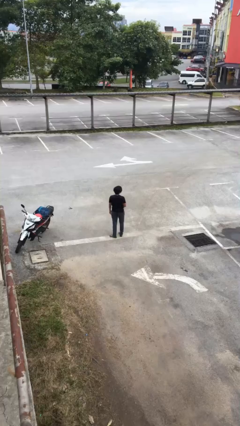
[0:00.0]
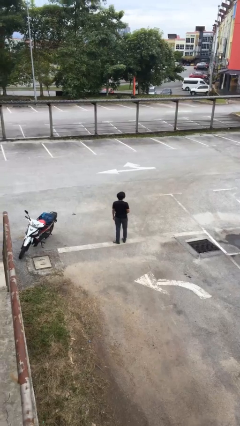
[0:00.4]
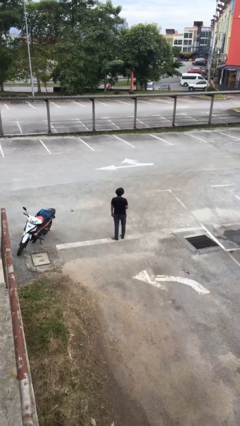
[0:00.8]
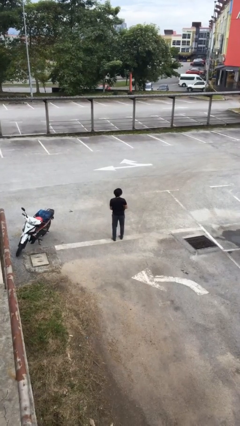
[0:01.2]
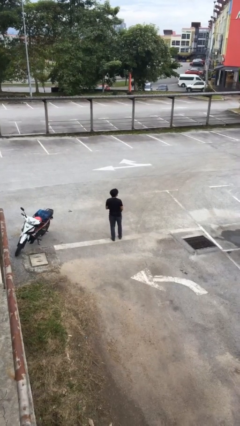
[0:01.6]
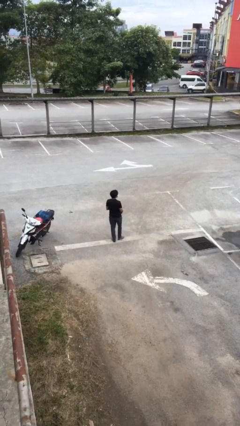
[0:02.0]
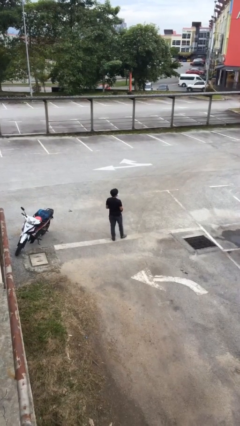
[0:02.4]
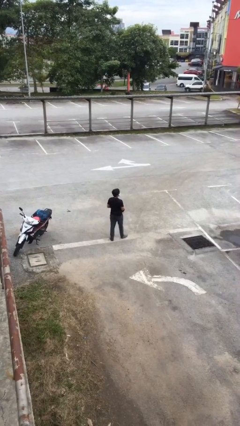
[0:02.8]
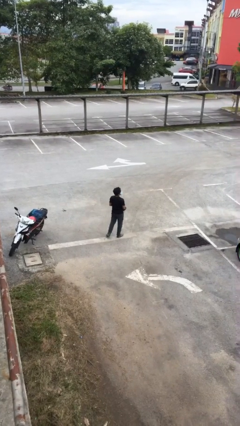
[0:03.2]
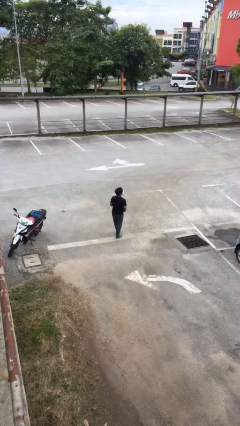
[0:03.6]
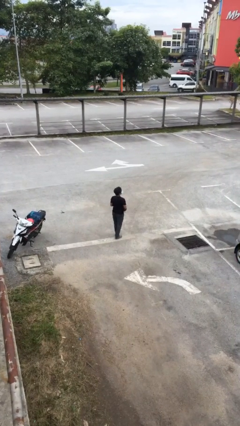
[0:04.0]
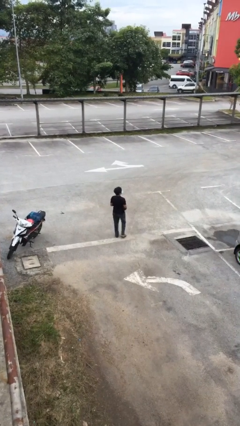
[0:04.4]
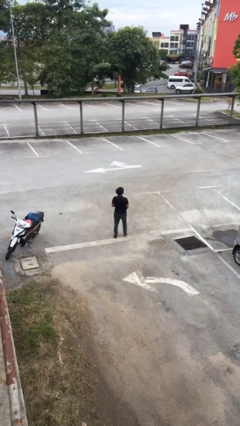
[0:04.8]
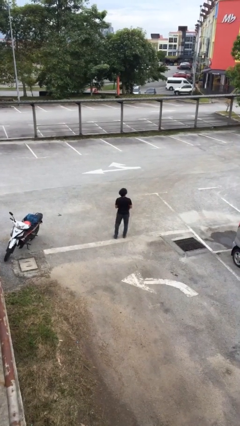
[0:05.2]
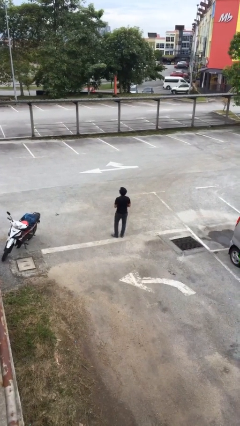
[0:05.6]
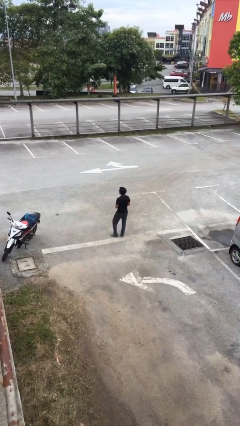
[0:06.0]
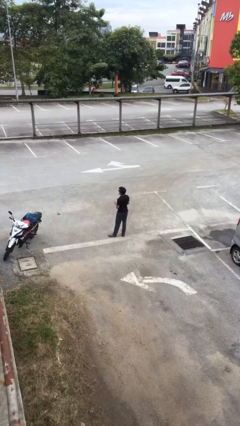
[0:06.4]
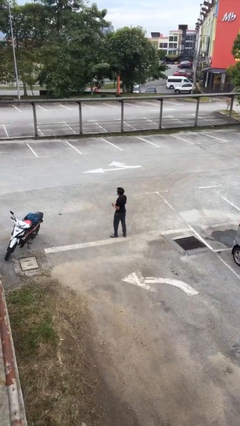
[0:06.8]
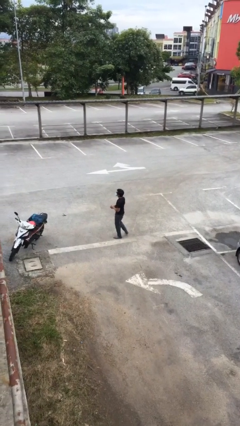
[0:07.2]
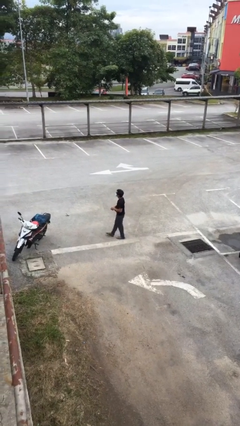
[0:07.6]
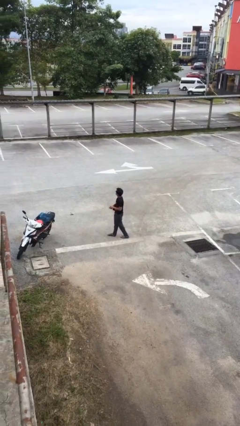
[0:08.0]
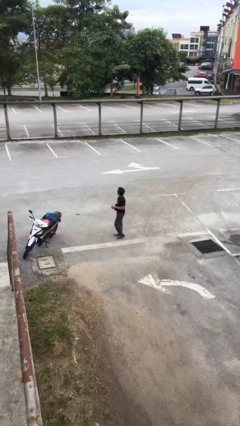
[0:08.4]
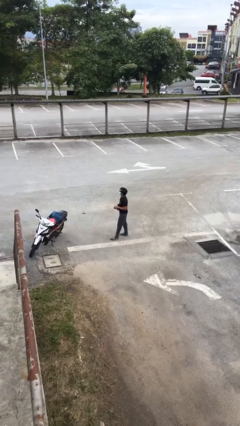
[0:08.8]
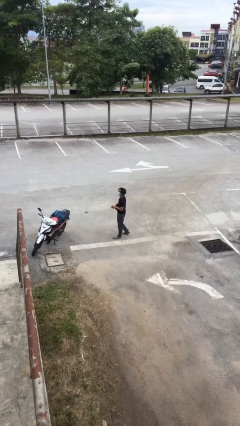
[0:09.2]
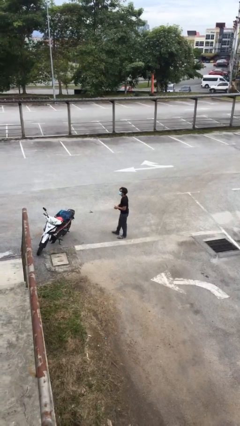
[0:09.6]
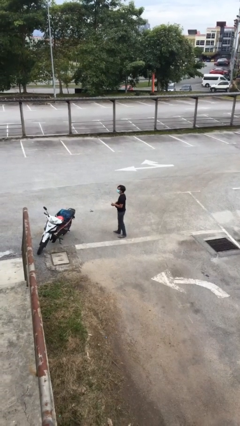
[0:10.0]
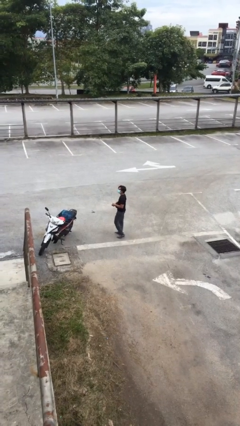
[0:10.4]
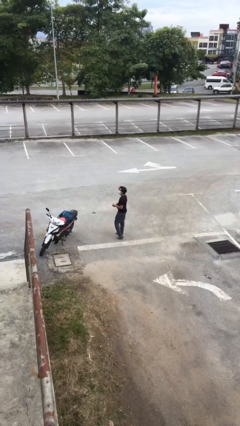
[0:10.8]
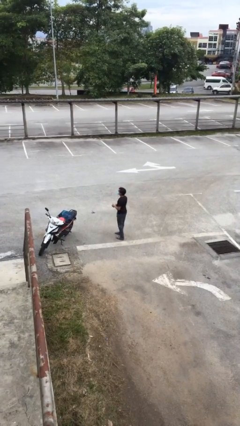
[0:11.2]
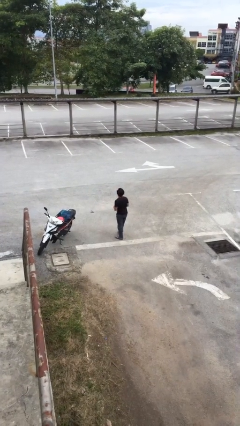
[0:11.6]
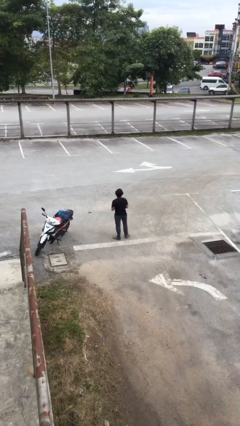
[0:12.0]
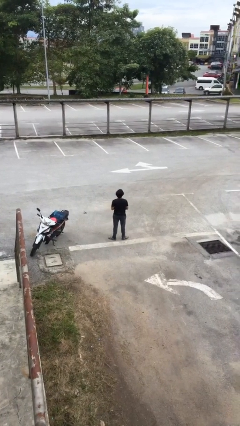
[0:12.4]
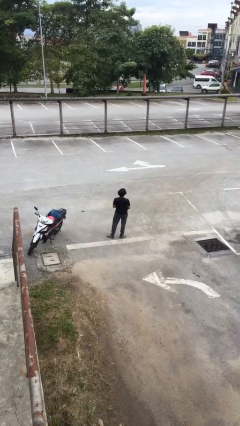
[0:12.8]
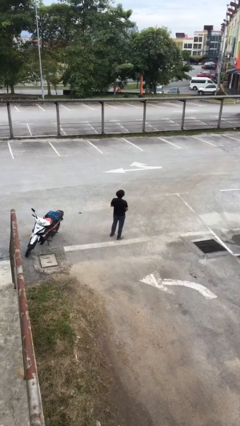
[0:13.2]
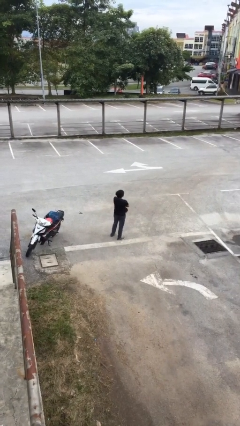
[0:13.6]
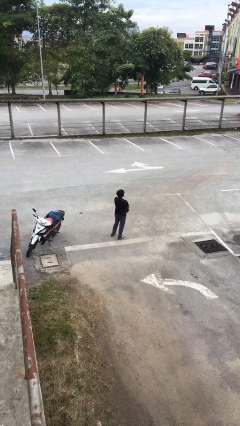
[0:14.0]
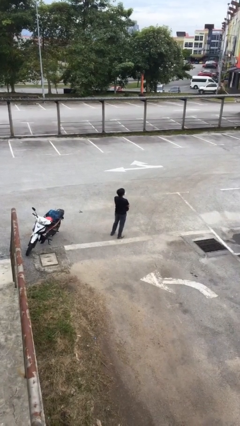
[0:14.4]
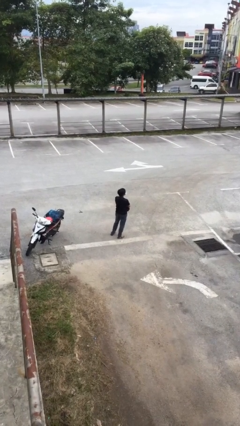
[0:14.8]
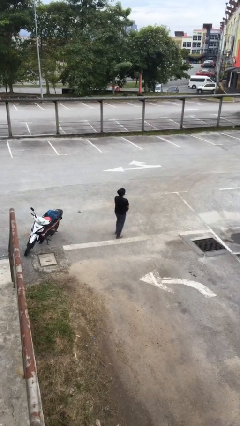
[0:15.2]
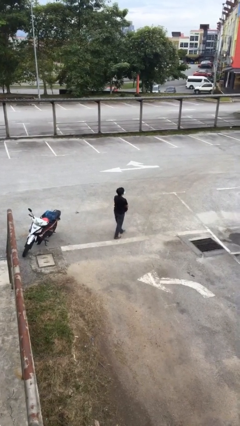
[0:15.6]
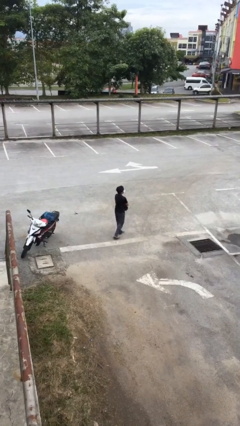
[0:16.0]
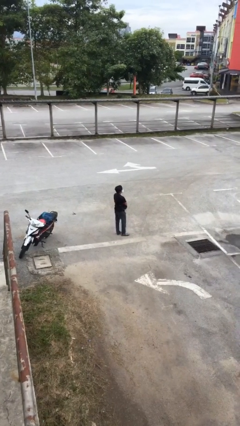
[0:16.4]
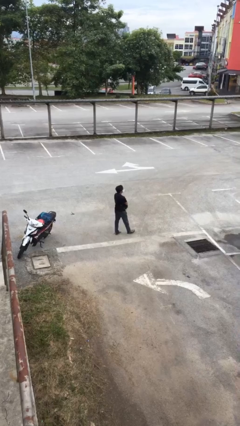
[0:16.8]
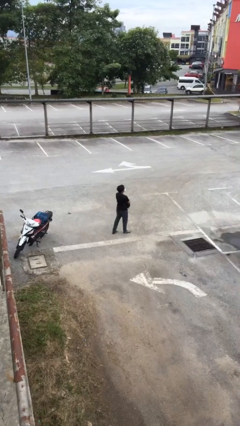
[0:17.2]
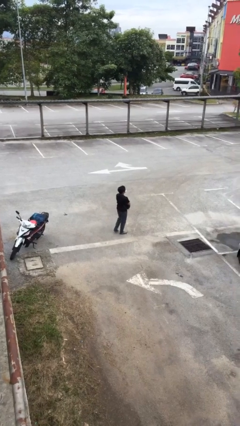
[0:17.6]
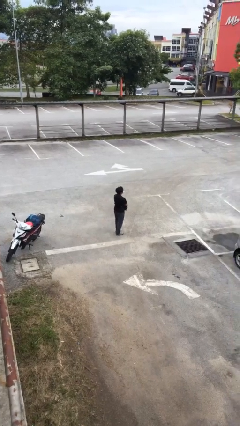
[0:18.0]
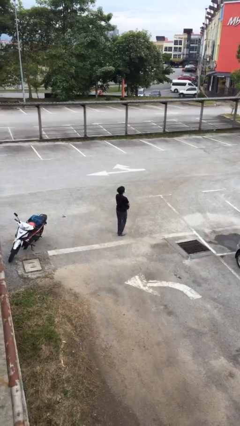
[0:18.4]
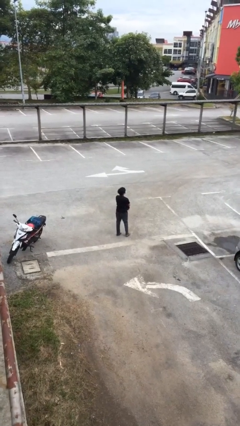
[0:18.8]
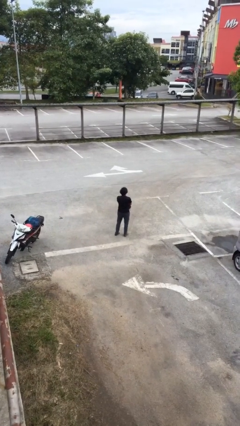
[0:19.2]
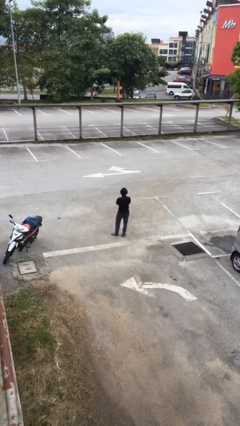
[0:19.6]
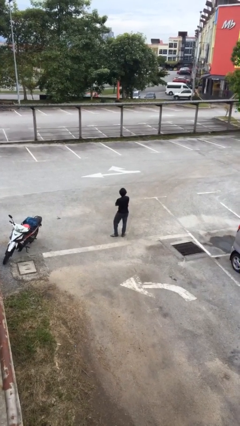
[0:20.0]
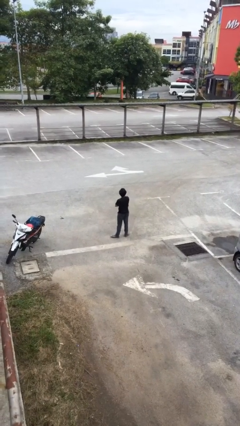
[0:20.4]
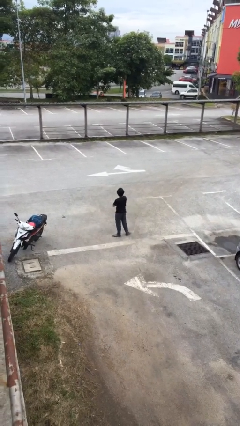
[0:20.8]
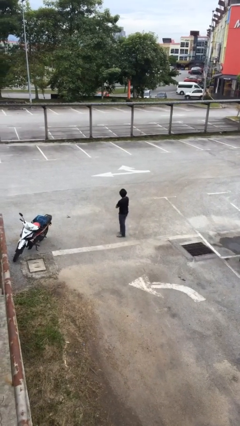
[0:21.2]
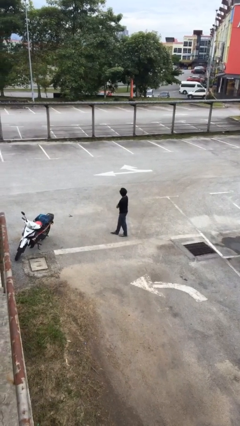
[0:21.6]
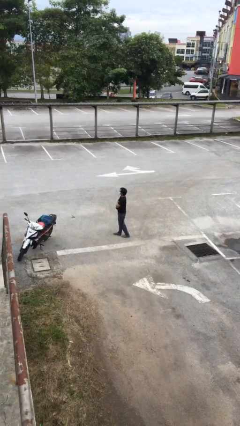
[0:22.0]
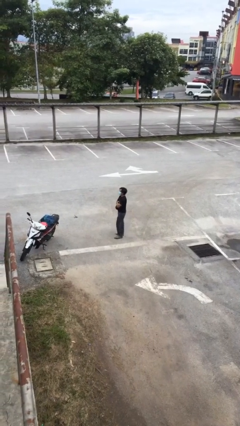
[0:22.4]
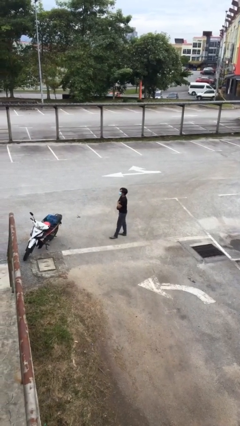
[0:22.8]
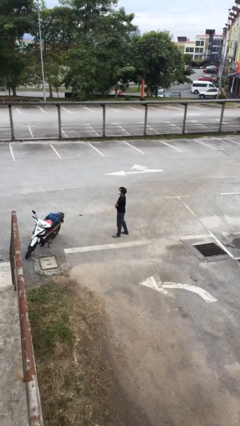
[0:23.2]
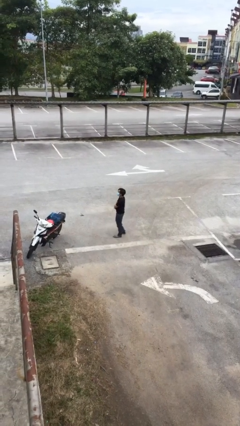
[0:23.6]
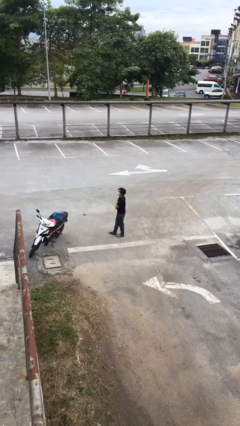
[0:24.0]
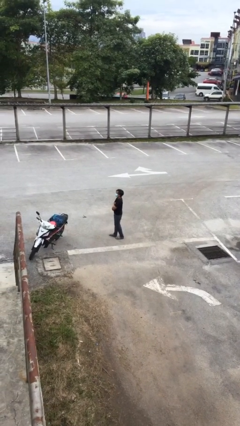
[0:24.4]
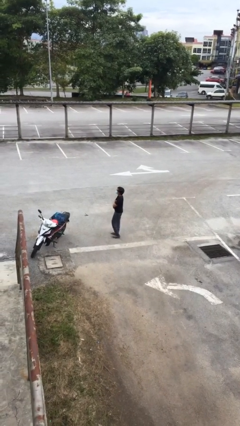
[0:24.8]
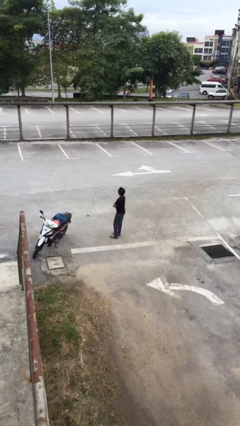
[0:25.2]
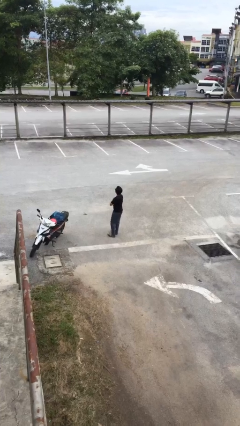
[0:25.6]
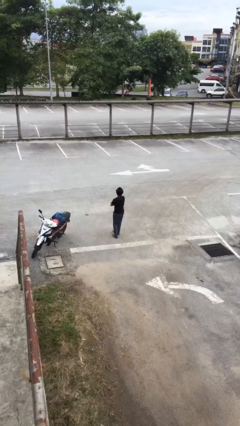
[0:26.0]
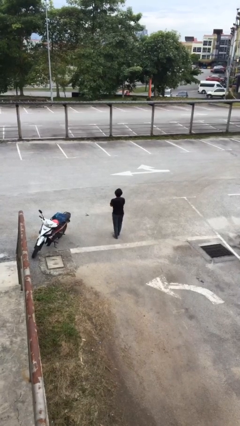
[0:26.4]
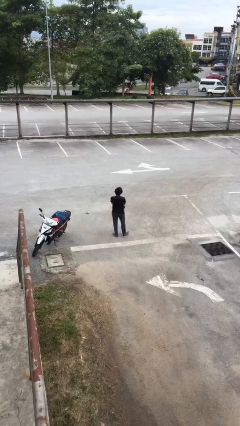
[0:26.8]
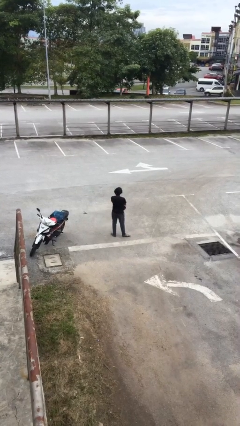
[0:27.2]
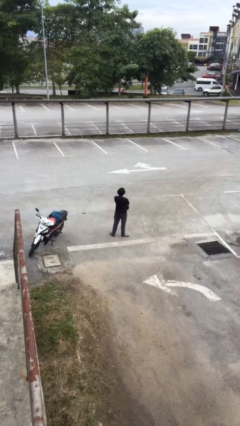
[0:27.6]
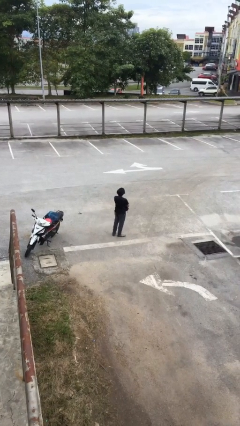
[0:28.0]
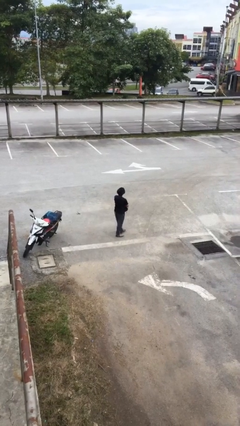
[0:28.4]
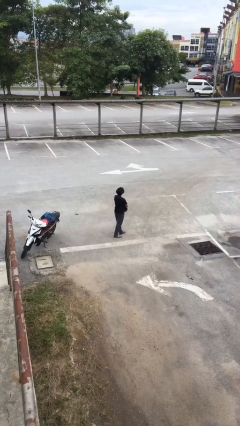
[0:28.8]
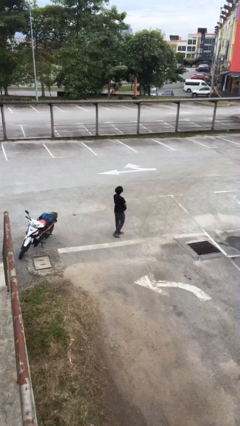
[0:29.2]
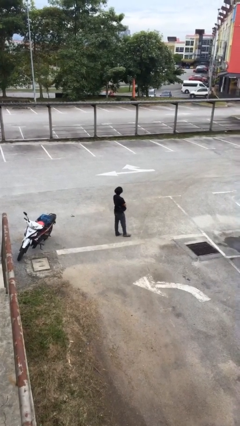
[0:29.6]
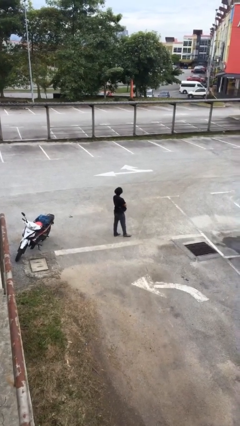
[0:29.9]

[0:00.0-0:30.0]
person walks

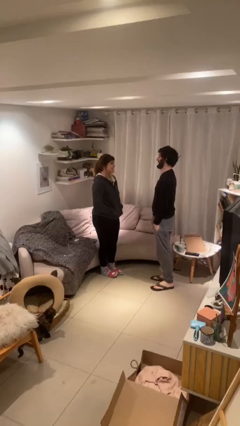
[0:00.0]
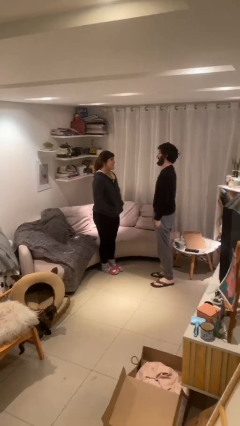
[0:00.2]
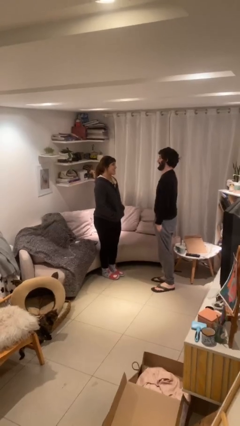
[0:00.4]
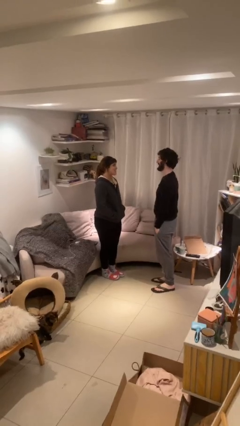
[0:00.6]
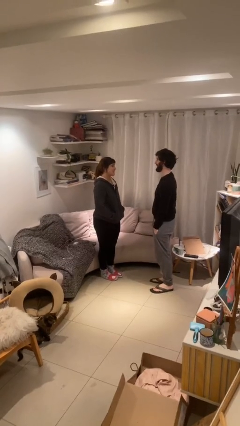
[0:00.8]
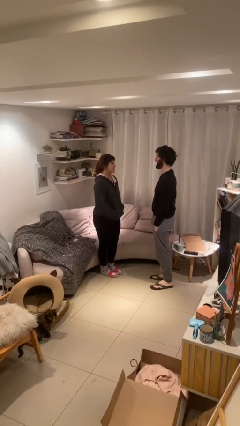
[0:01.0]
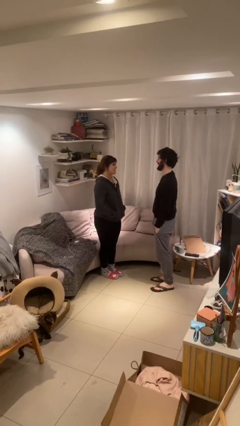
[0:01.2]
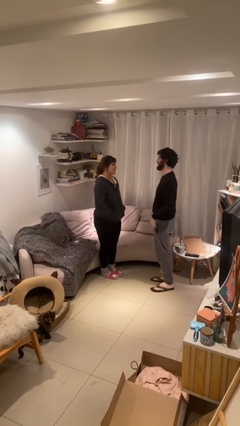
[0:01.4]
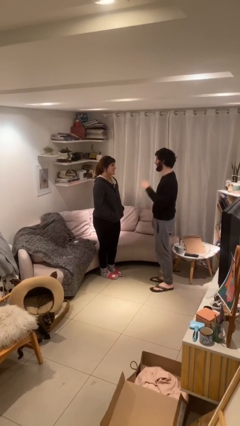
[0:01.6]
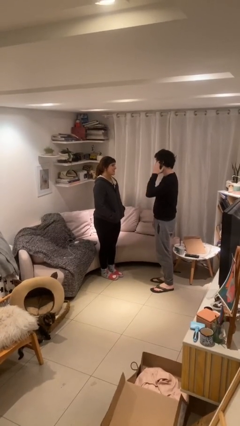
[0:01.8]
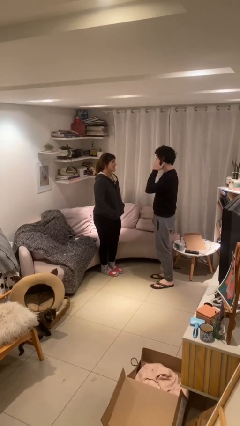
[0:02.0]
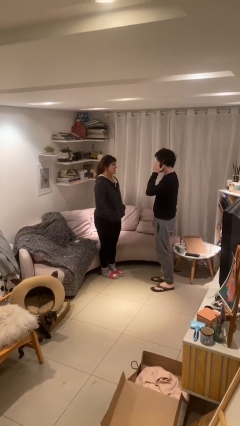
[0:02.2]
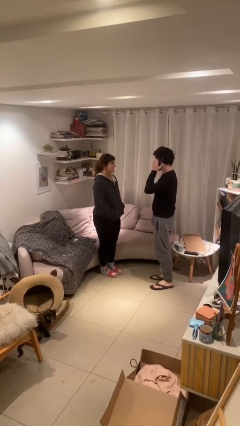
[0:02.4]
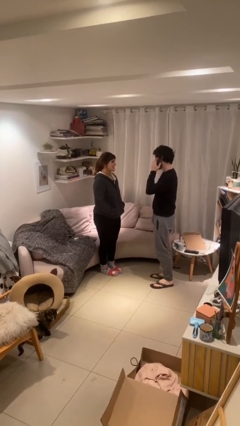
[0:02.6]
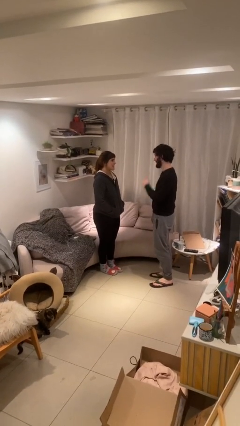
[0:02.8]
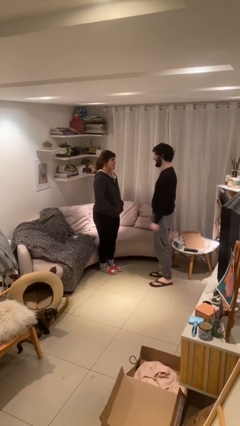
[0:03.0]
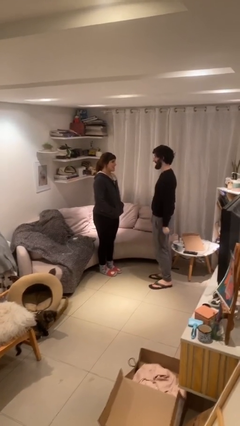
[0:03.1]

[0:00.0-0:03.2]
person talks to person
